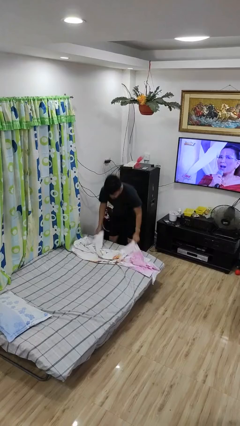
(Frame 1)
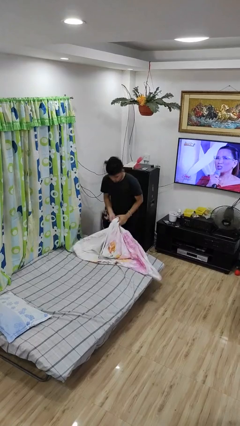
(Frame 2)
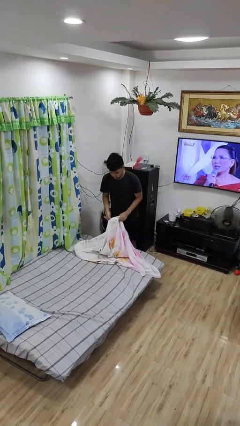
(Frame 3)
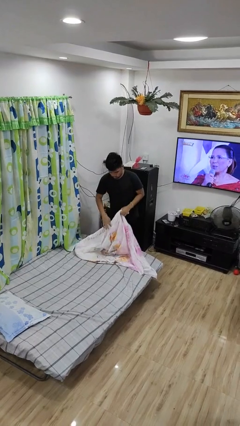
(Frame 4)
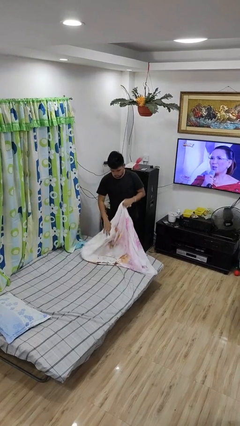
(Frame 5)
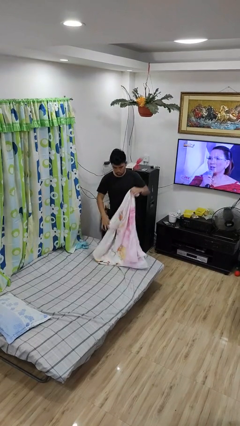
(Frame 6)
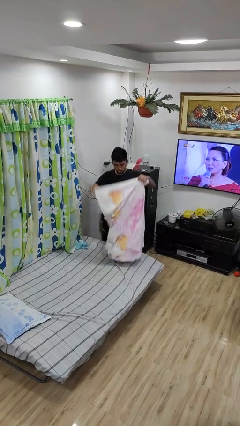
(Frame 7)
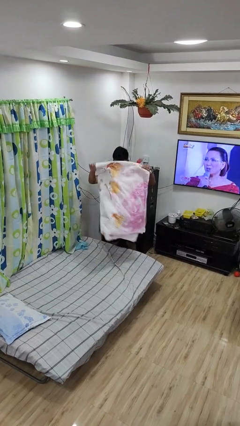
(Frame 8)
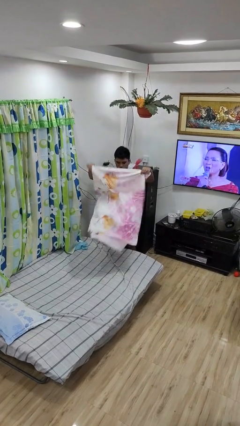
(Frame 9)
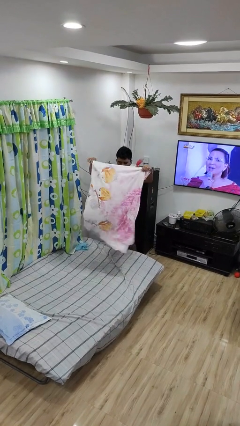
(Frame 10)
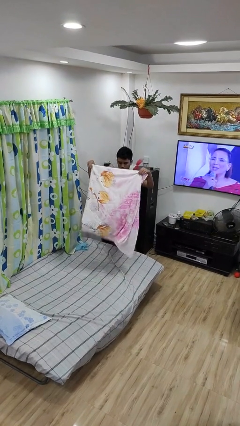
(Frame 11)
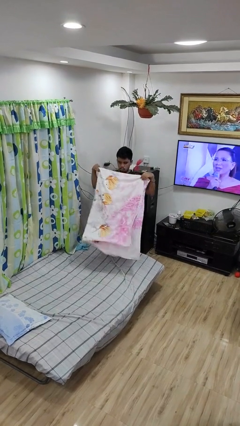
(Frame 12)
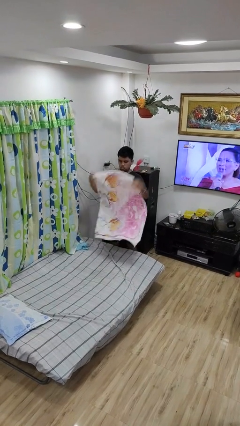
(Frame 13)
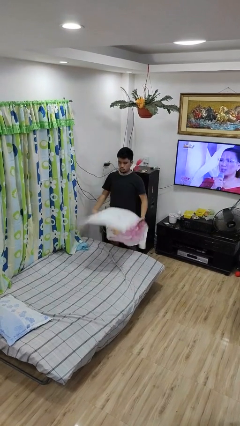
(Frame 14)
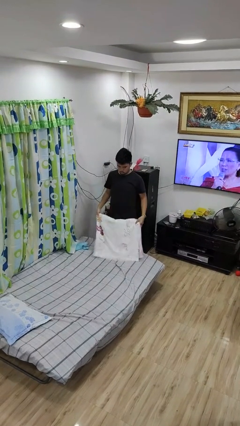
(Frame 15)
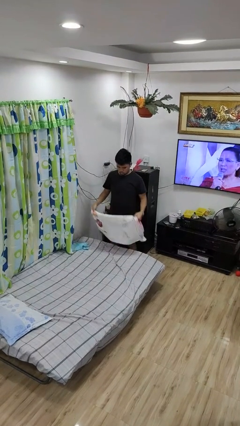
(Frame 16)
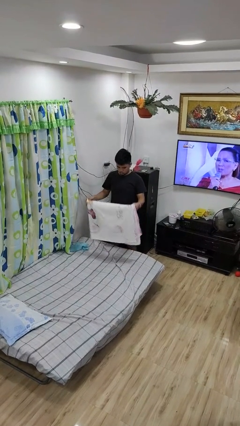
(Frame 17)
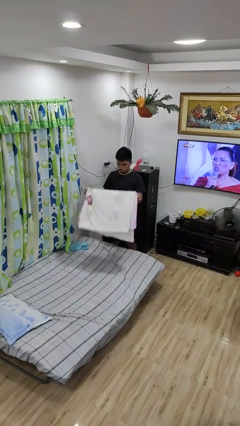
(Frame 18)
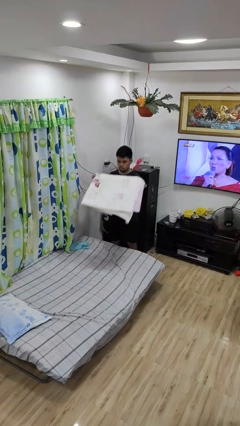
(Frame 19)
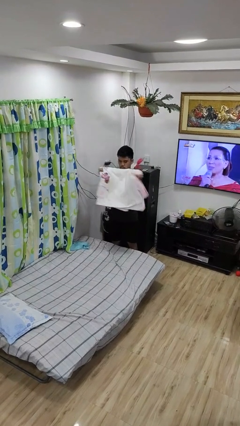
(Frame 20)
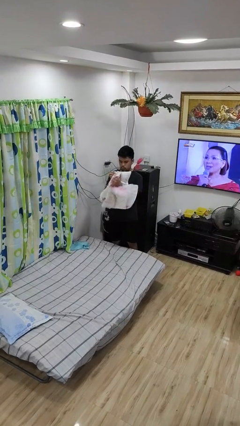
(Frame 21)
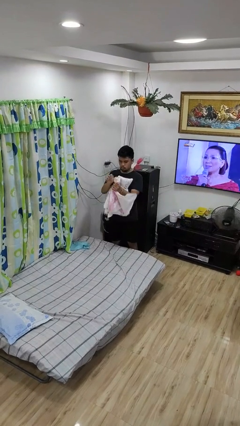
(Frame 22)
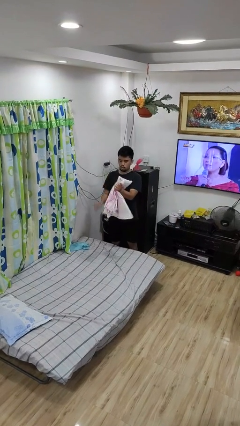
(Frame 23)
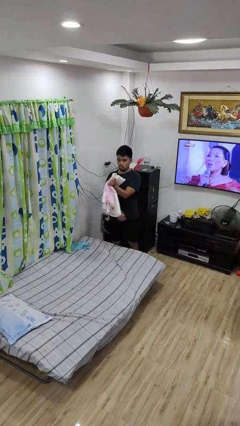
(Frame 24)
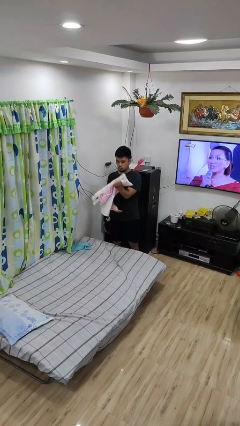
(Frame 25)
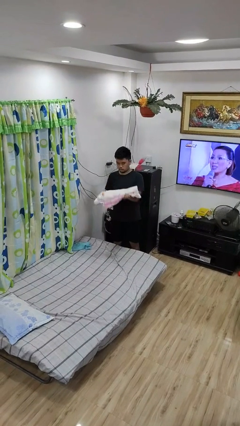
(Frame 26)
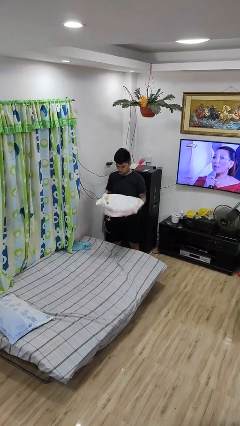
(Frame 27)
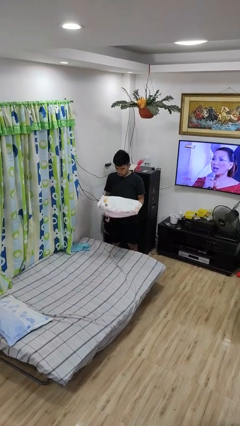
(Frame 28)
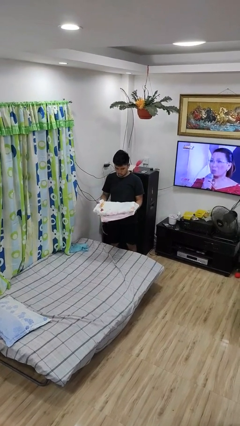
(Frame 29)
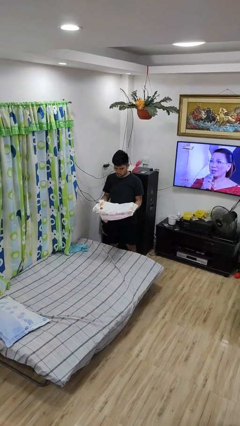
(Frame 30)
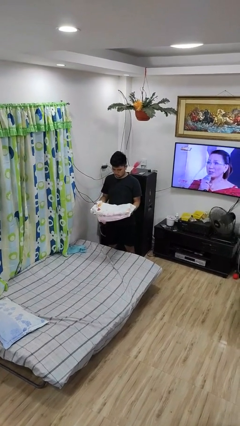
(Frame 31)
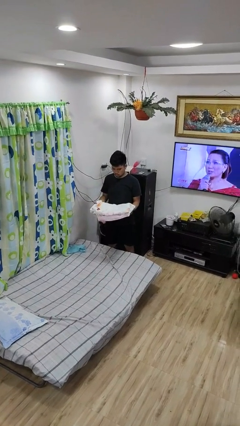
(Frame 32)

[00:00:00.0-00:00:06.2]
person folds blanket

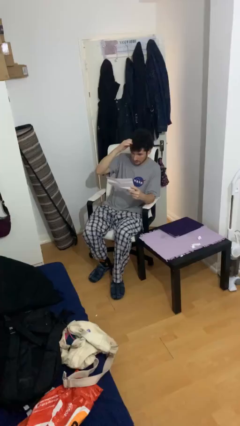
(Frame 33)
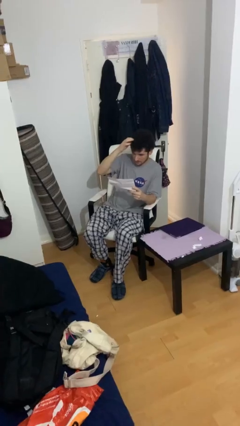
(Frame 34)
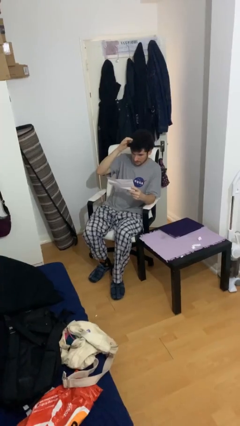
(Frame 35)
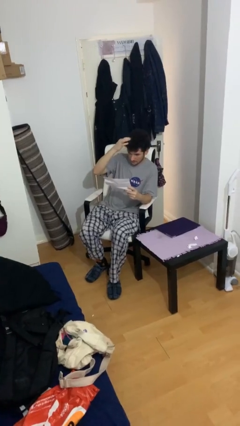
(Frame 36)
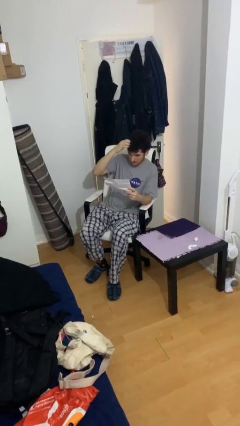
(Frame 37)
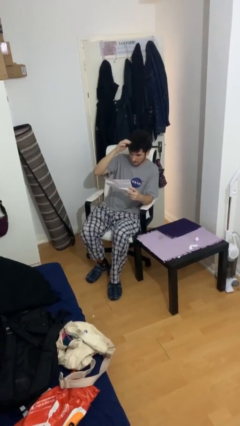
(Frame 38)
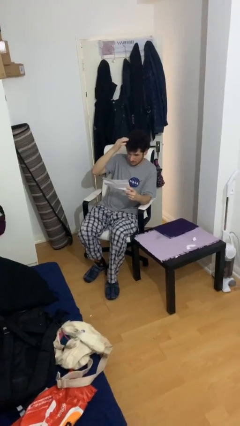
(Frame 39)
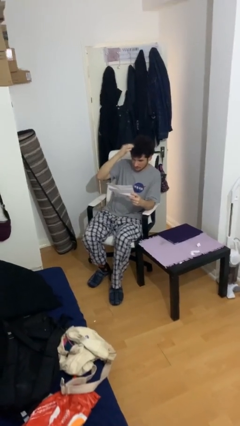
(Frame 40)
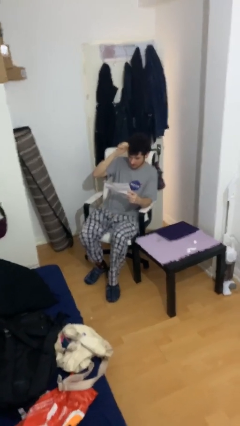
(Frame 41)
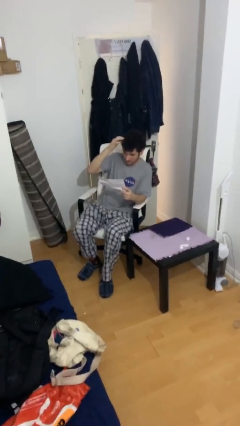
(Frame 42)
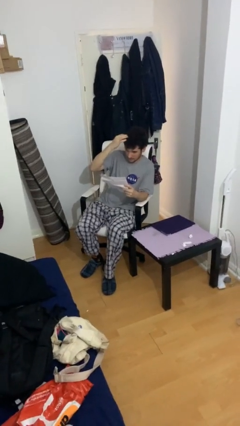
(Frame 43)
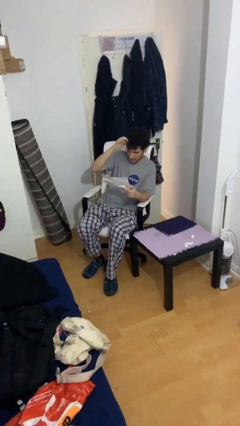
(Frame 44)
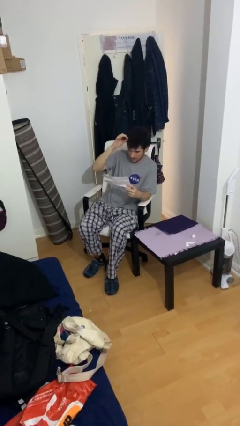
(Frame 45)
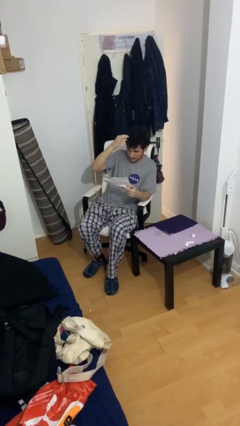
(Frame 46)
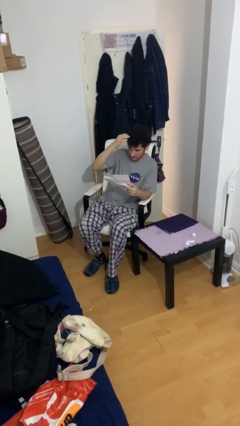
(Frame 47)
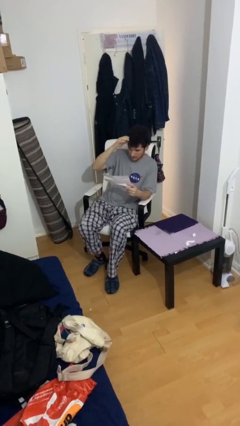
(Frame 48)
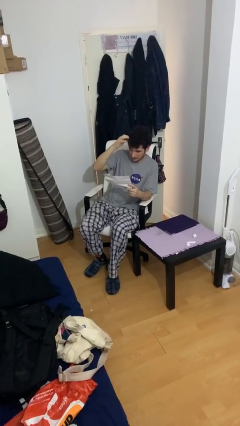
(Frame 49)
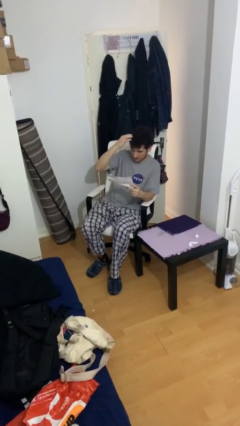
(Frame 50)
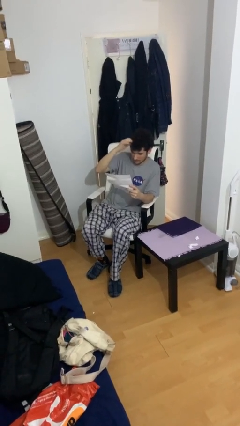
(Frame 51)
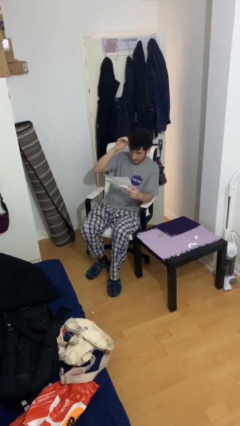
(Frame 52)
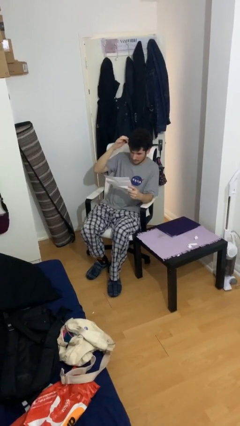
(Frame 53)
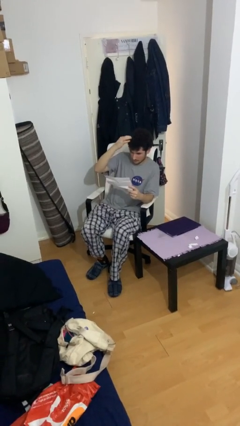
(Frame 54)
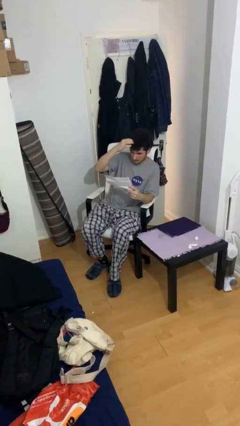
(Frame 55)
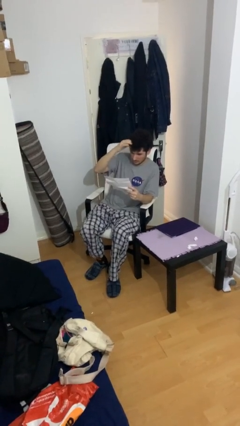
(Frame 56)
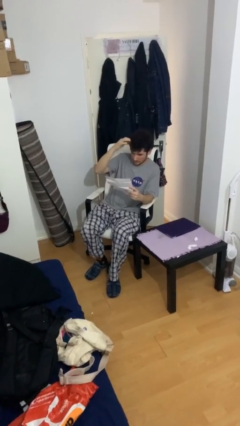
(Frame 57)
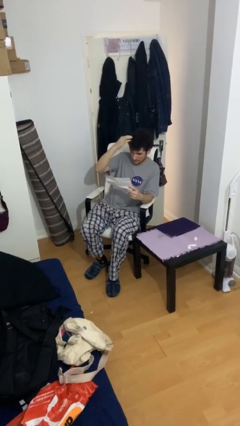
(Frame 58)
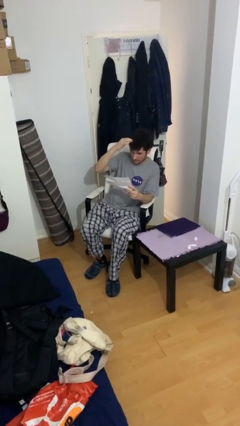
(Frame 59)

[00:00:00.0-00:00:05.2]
person reads document

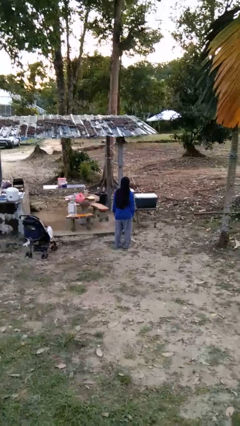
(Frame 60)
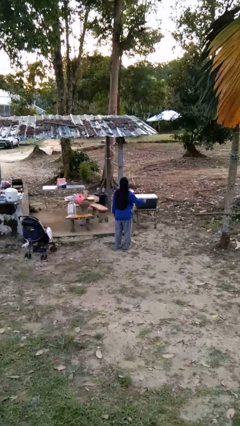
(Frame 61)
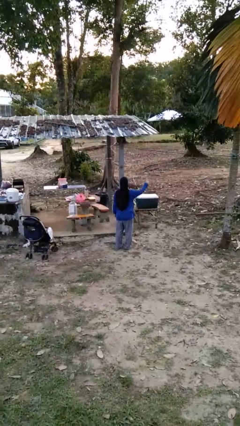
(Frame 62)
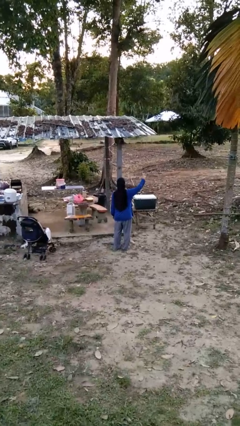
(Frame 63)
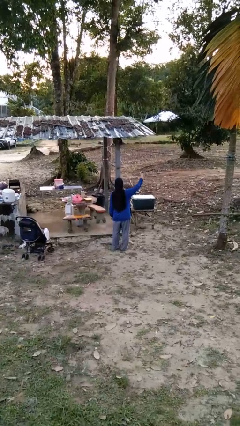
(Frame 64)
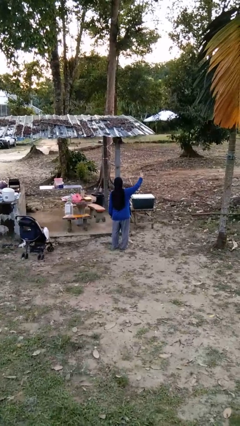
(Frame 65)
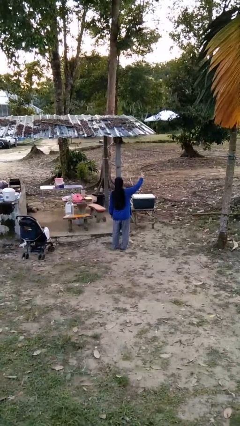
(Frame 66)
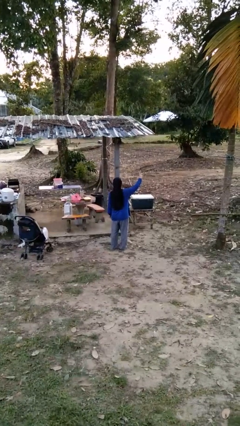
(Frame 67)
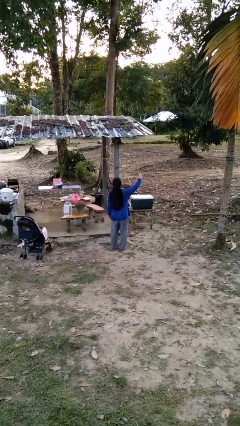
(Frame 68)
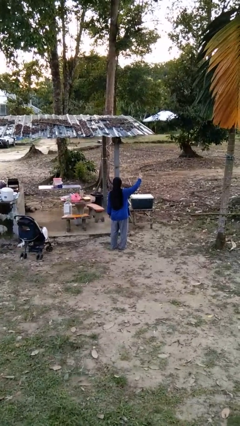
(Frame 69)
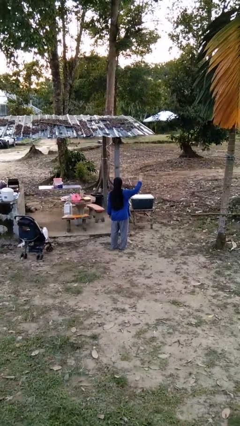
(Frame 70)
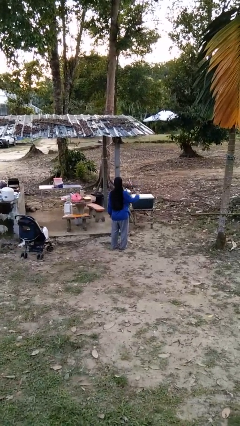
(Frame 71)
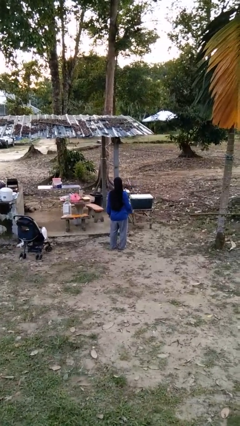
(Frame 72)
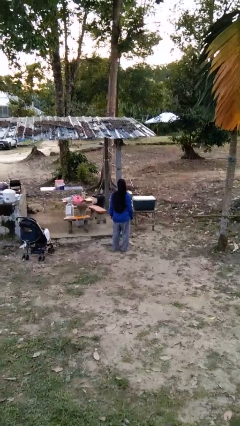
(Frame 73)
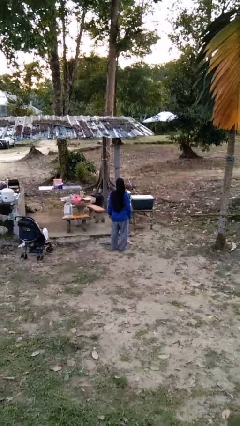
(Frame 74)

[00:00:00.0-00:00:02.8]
person gestures number three

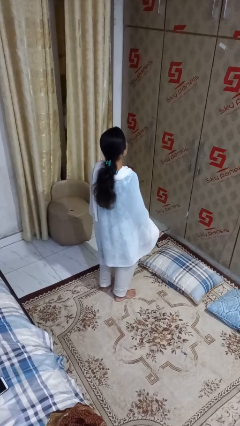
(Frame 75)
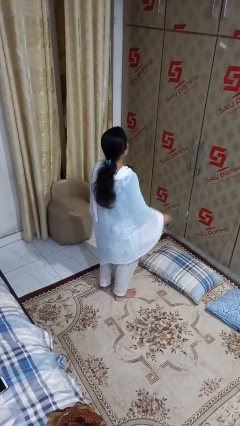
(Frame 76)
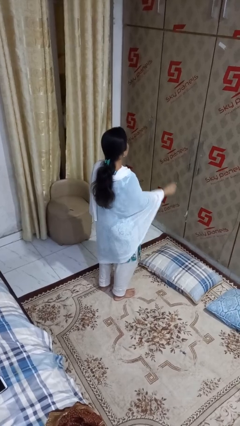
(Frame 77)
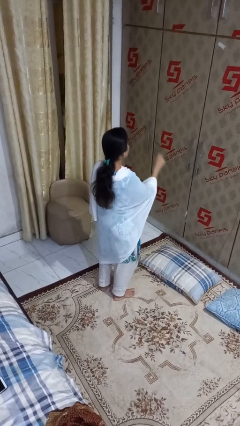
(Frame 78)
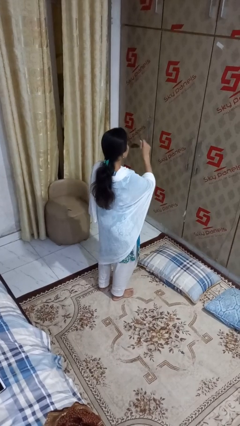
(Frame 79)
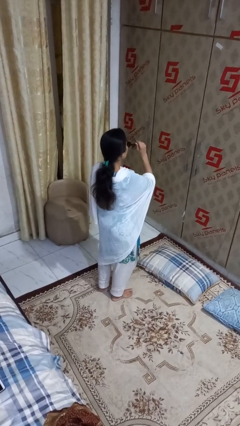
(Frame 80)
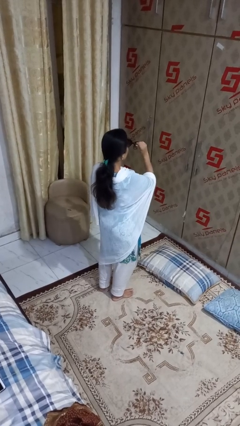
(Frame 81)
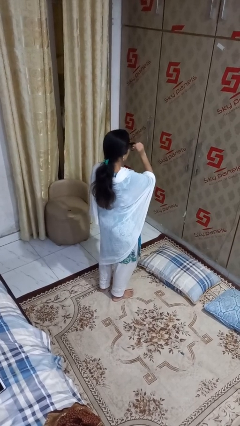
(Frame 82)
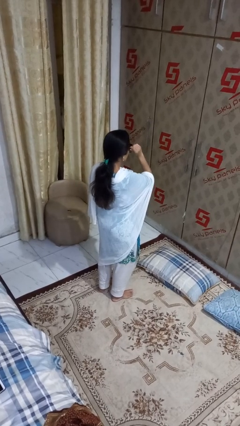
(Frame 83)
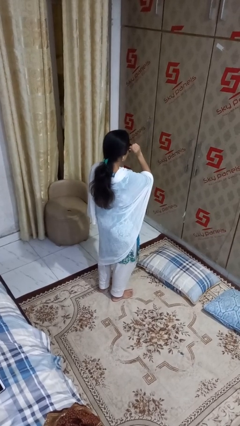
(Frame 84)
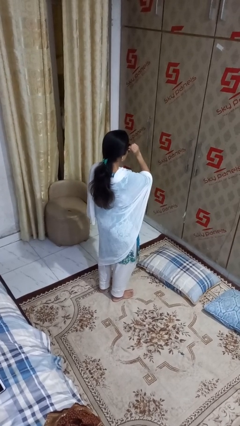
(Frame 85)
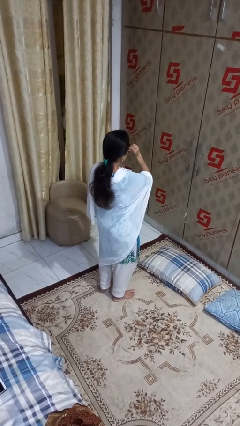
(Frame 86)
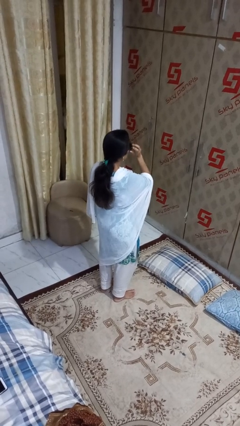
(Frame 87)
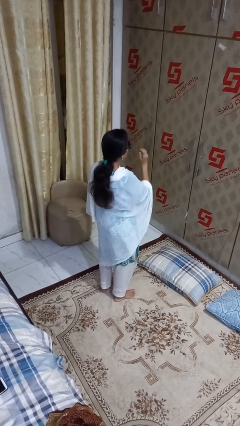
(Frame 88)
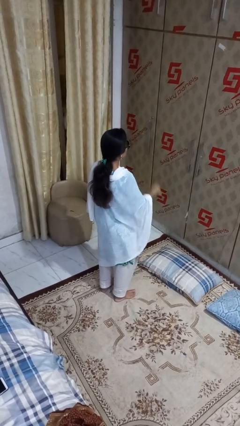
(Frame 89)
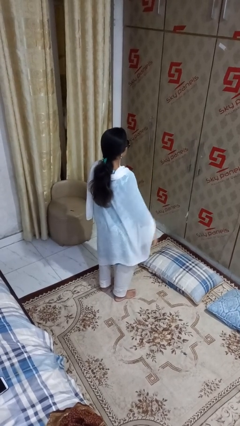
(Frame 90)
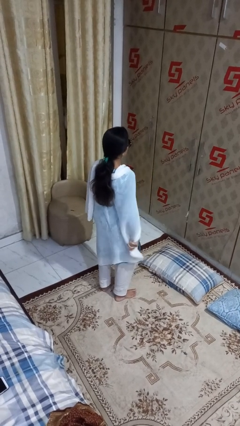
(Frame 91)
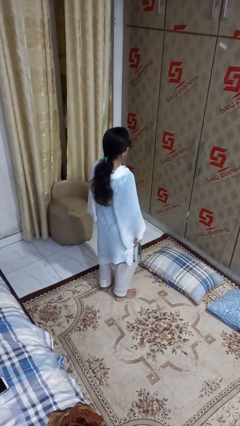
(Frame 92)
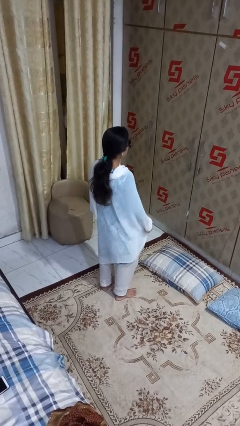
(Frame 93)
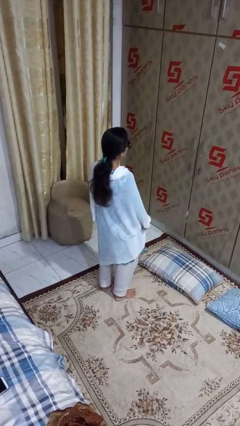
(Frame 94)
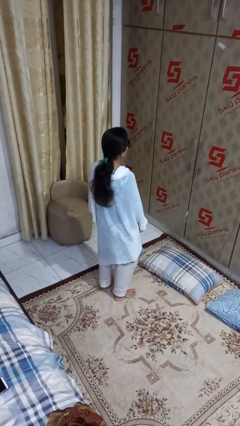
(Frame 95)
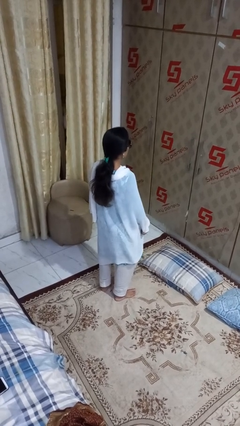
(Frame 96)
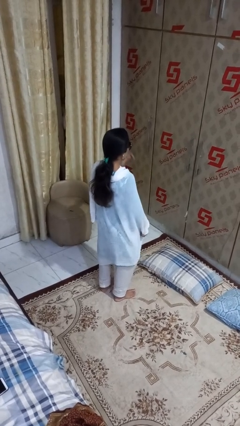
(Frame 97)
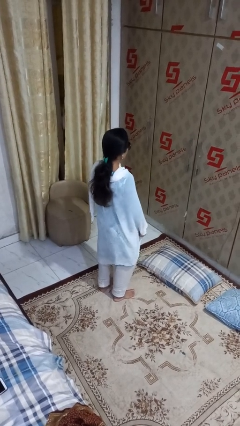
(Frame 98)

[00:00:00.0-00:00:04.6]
person puts on sunglasses
